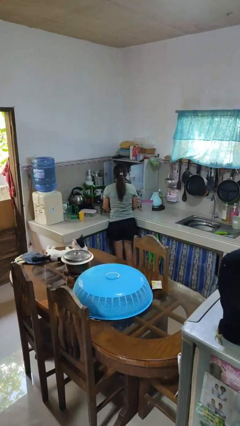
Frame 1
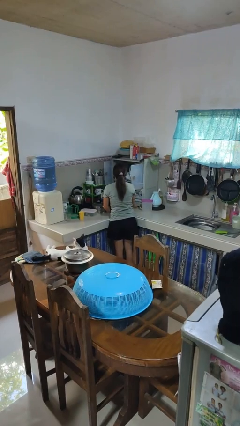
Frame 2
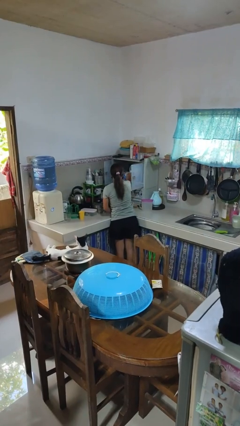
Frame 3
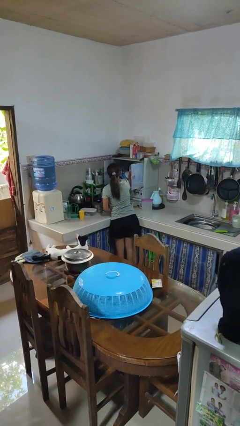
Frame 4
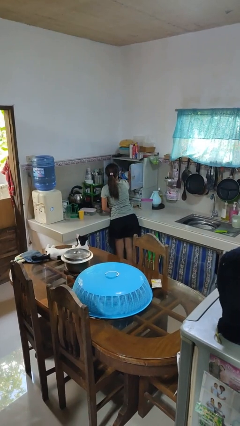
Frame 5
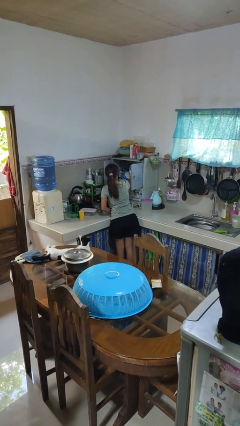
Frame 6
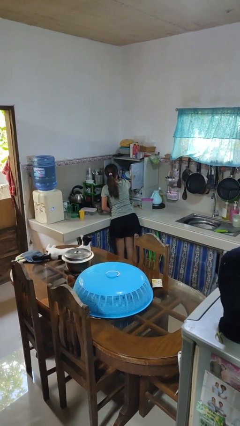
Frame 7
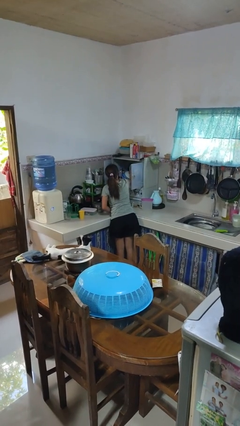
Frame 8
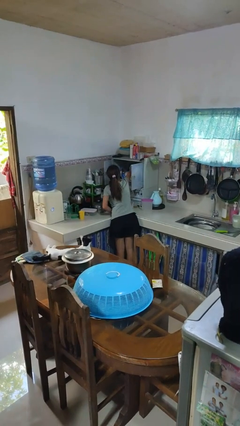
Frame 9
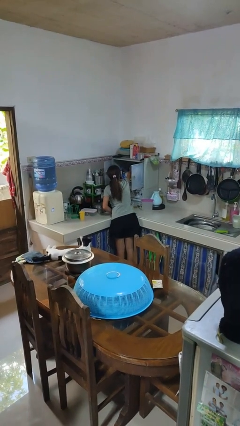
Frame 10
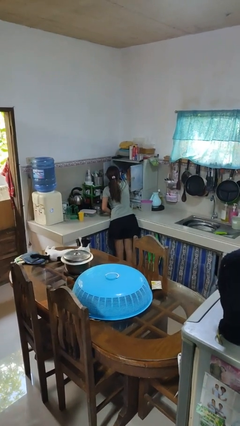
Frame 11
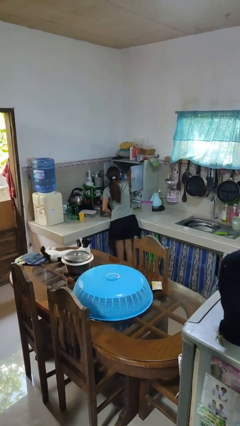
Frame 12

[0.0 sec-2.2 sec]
person searches in kitchen drawer

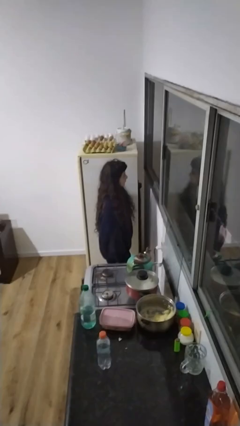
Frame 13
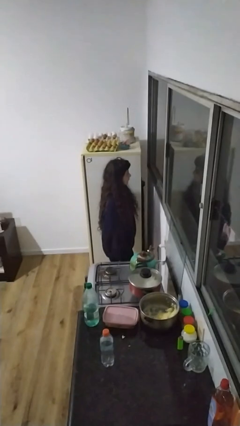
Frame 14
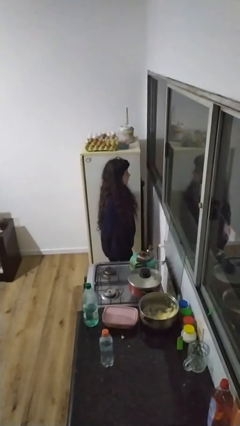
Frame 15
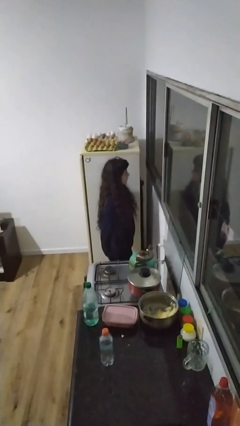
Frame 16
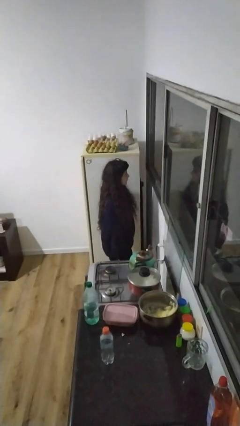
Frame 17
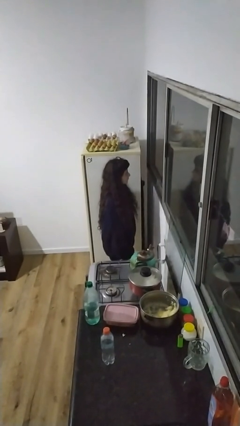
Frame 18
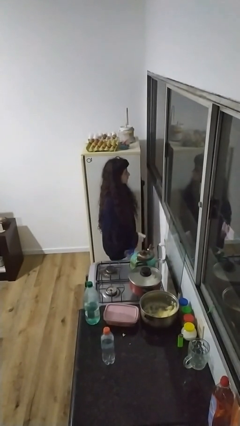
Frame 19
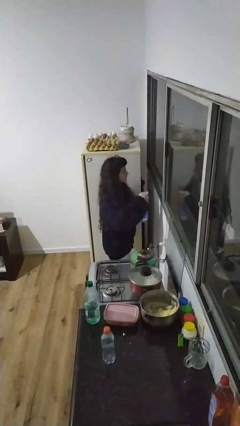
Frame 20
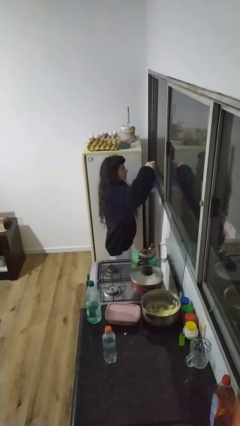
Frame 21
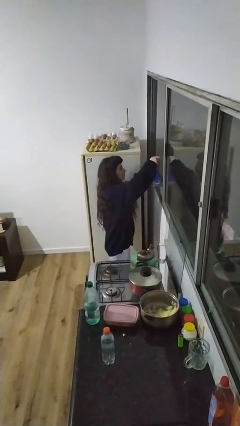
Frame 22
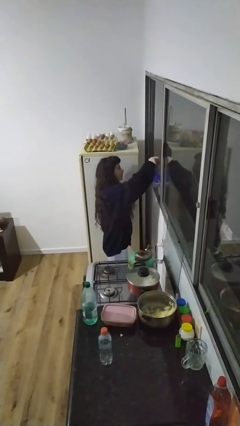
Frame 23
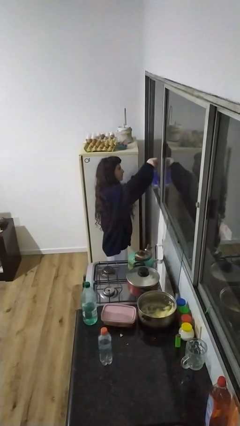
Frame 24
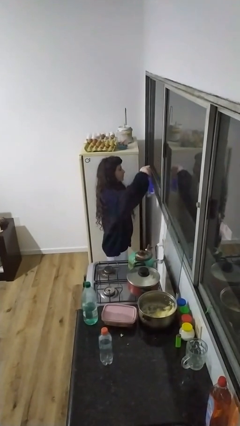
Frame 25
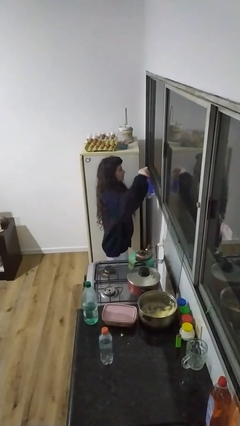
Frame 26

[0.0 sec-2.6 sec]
person sprays from bottle

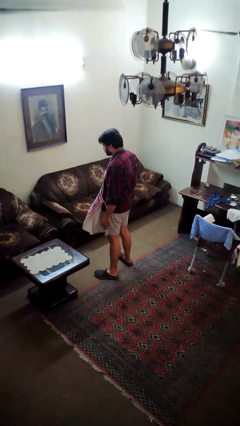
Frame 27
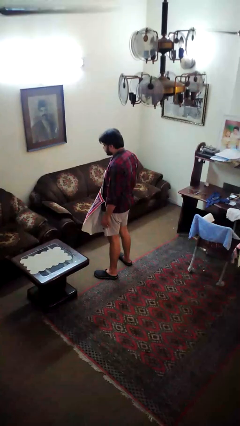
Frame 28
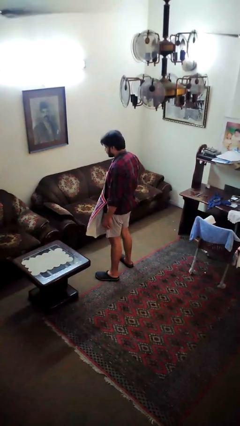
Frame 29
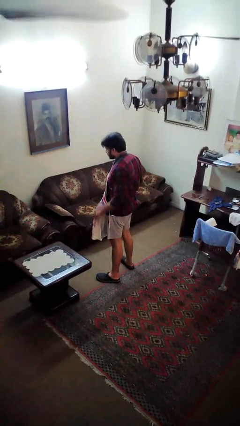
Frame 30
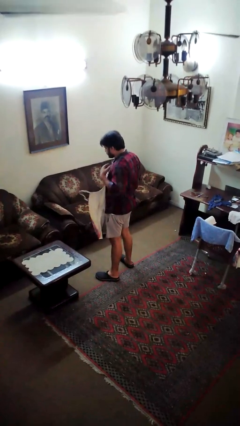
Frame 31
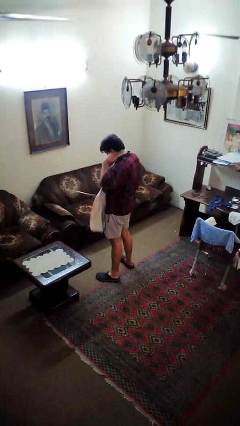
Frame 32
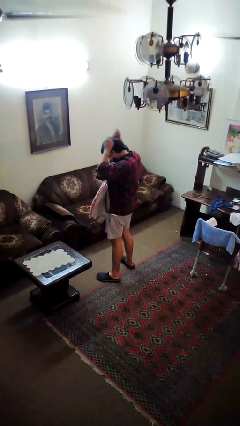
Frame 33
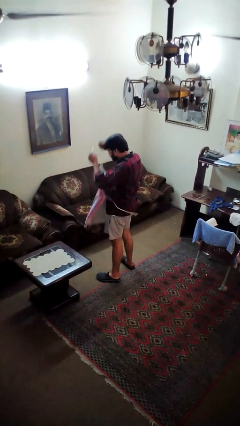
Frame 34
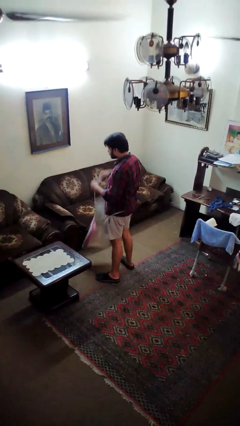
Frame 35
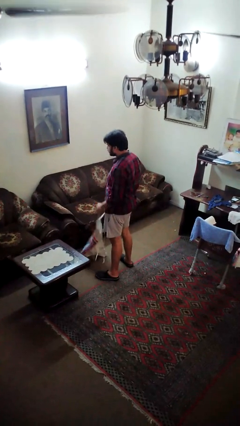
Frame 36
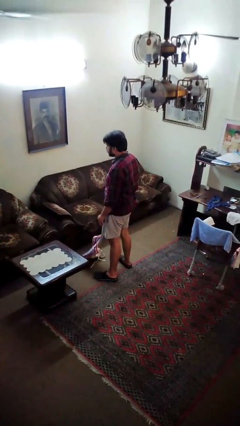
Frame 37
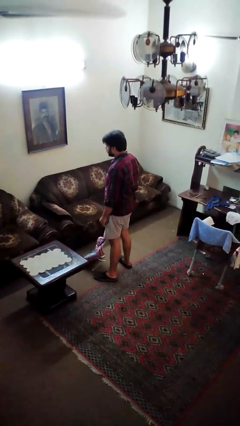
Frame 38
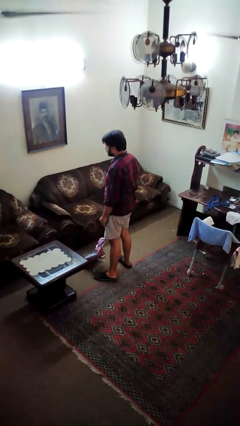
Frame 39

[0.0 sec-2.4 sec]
person takes off apron

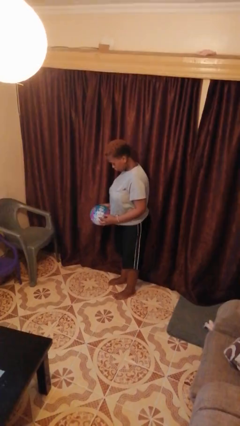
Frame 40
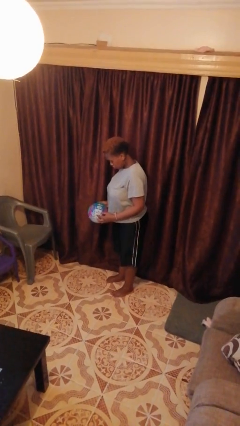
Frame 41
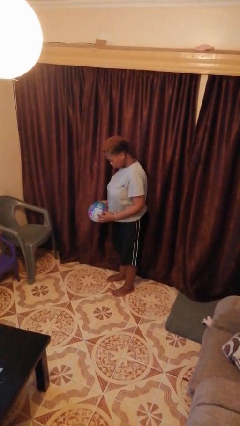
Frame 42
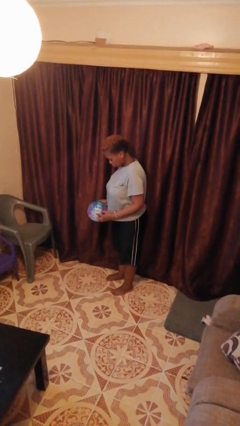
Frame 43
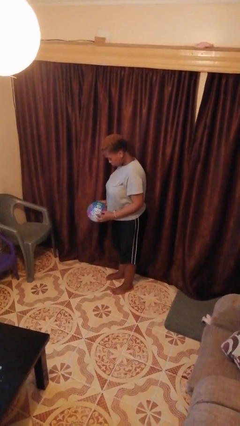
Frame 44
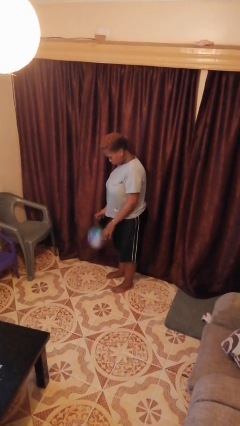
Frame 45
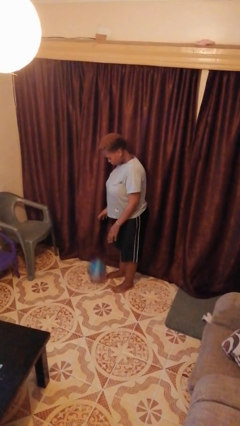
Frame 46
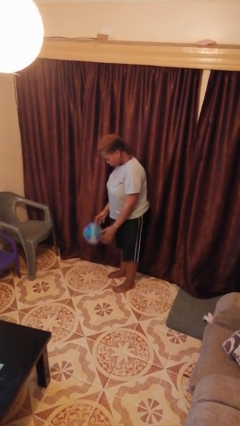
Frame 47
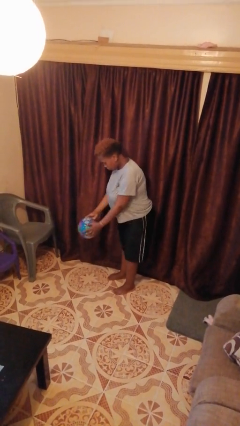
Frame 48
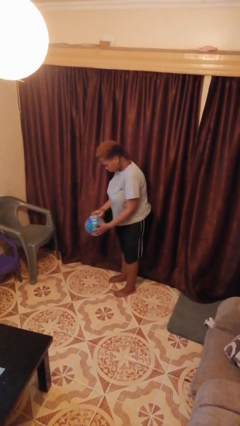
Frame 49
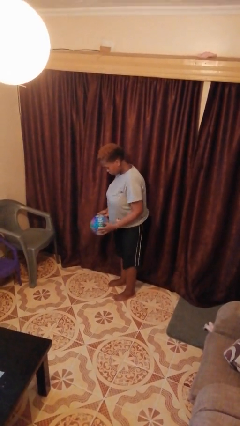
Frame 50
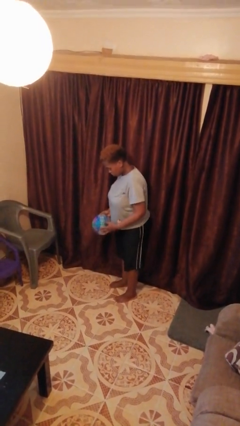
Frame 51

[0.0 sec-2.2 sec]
person bounces ball on floor

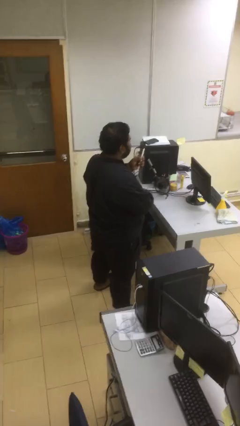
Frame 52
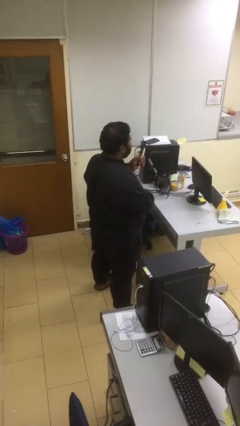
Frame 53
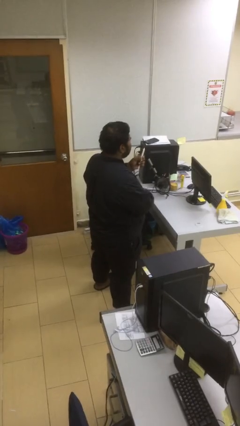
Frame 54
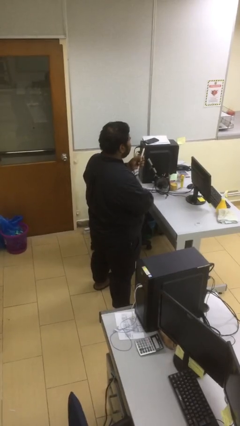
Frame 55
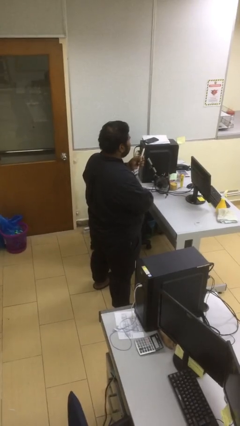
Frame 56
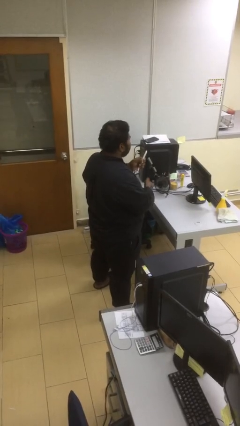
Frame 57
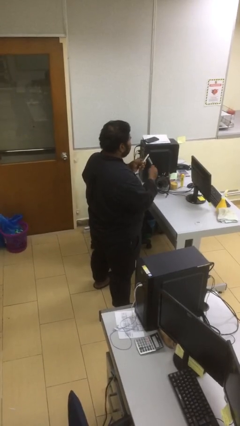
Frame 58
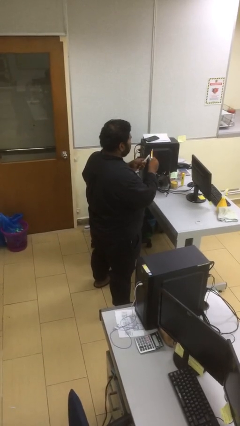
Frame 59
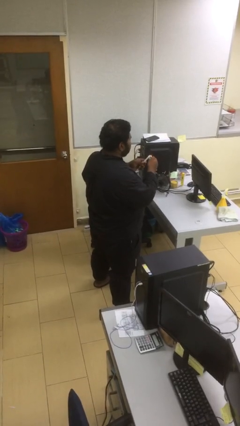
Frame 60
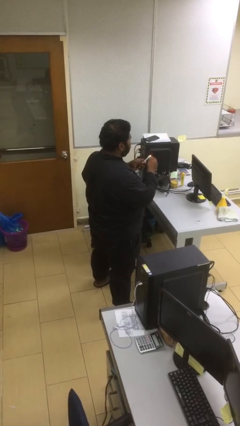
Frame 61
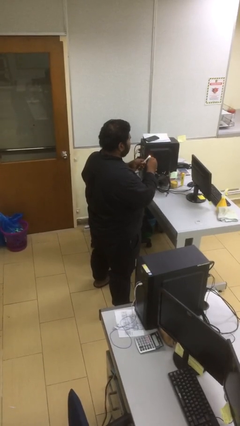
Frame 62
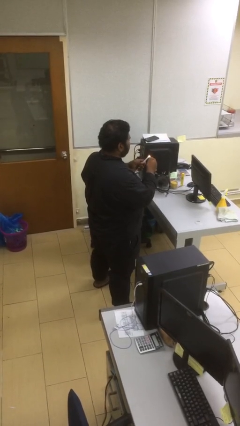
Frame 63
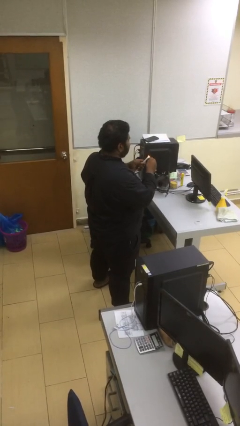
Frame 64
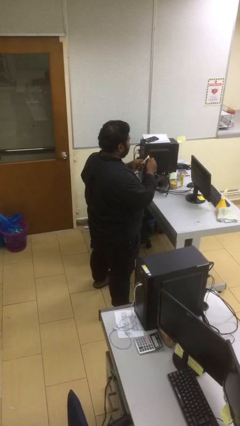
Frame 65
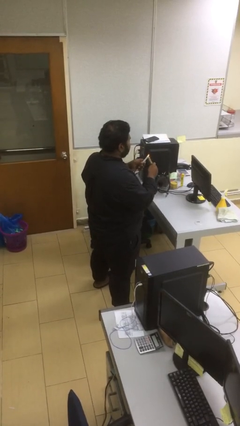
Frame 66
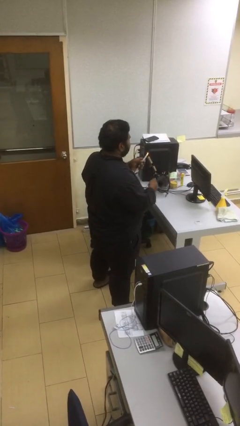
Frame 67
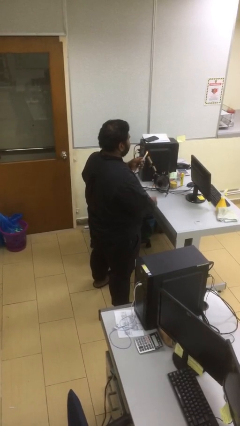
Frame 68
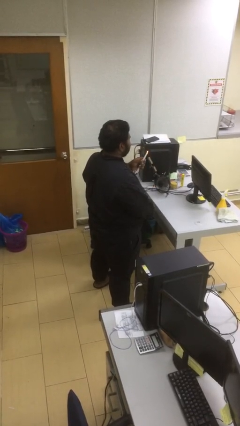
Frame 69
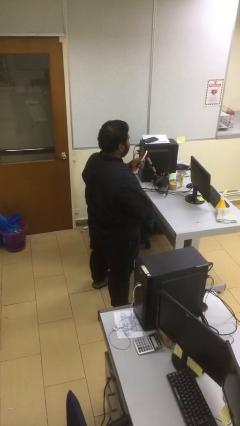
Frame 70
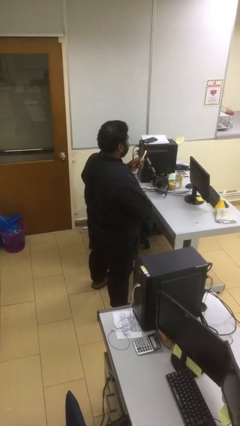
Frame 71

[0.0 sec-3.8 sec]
person lights candle

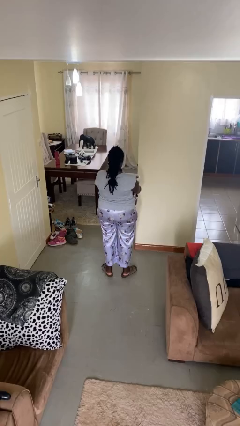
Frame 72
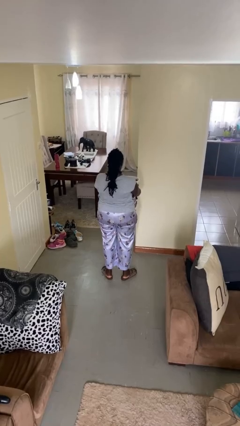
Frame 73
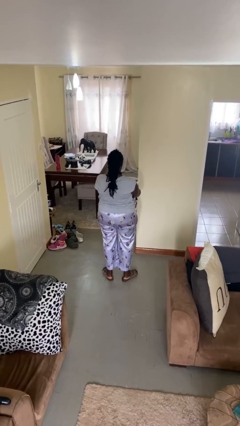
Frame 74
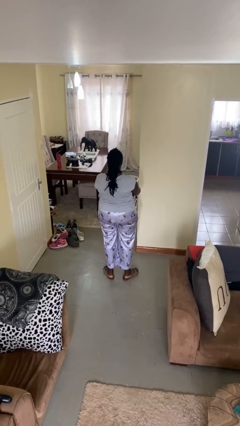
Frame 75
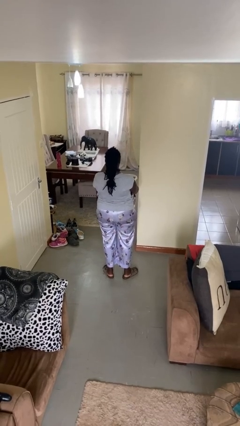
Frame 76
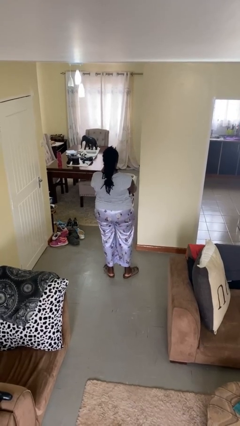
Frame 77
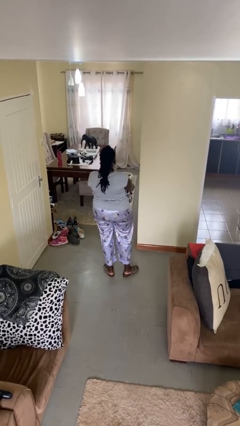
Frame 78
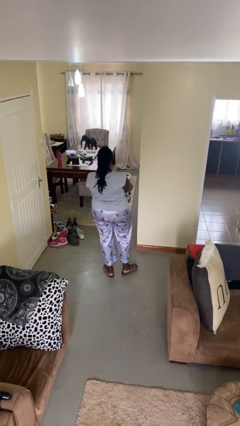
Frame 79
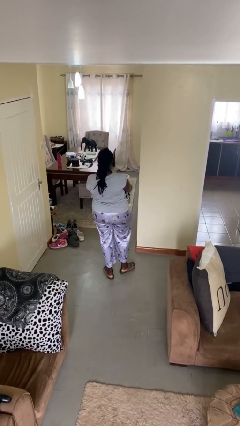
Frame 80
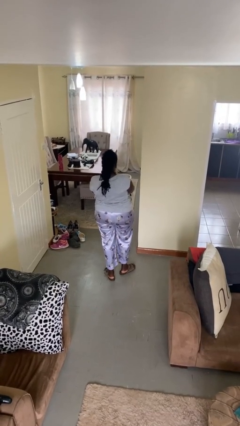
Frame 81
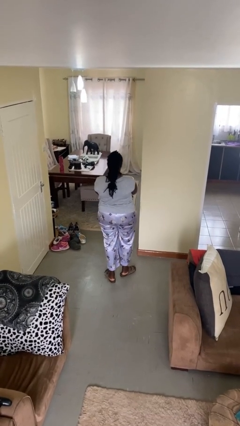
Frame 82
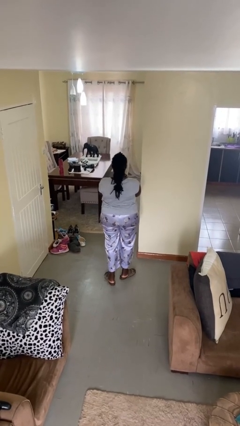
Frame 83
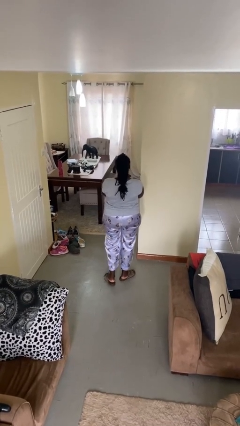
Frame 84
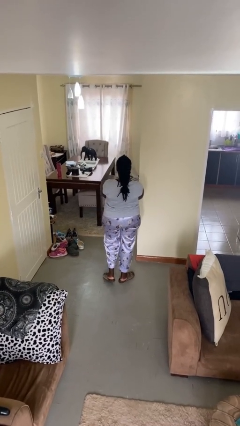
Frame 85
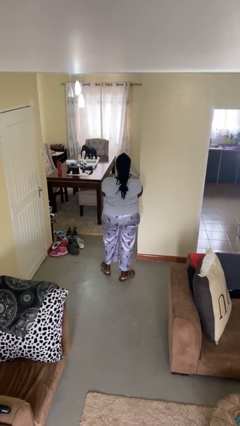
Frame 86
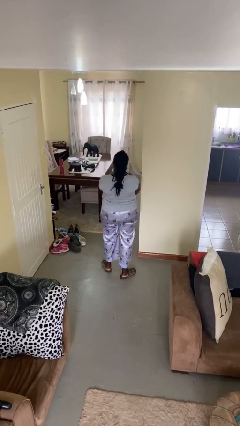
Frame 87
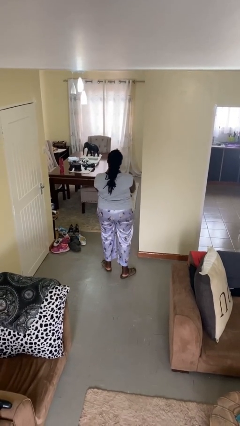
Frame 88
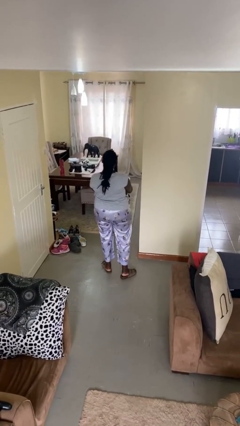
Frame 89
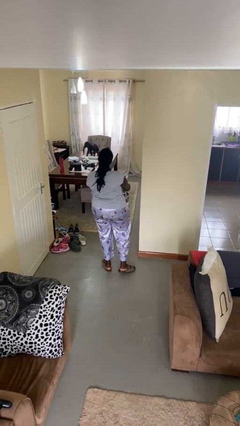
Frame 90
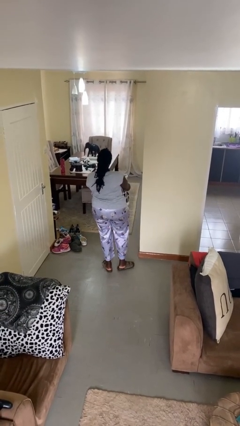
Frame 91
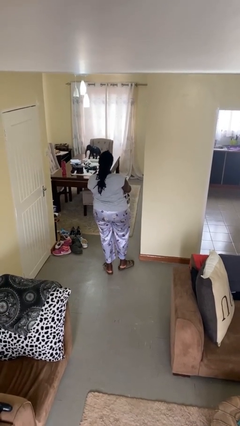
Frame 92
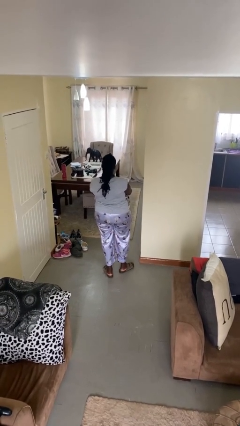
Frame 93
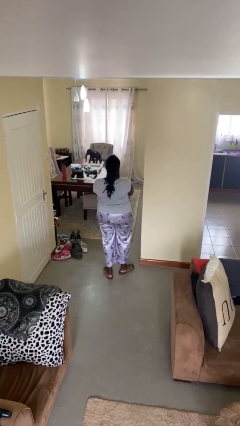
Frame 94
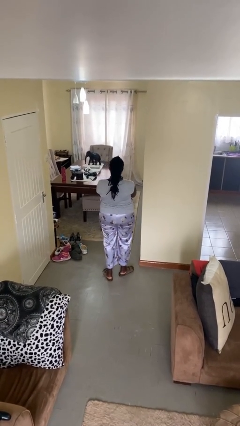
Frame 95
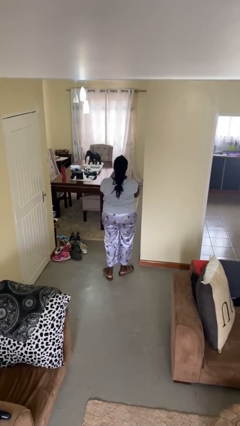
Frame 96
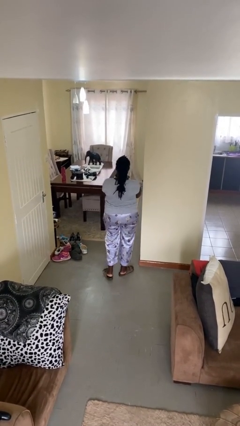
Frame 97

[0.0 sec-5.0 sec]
person carries laundry basket
